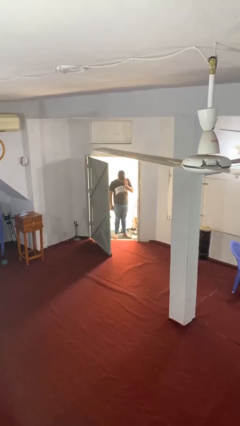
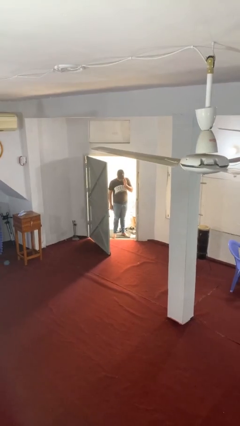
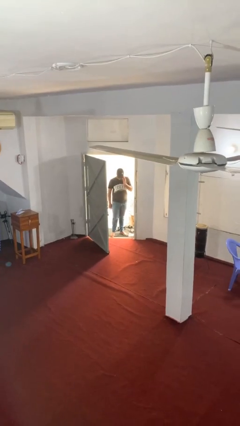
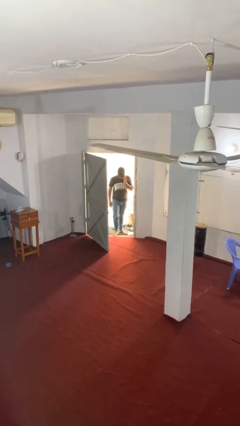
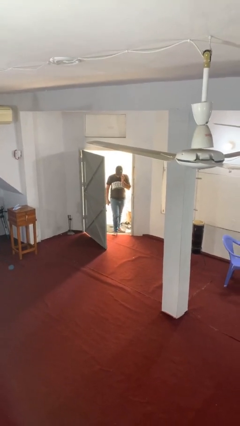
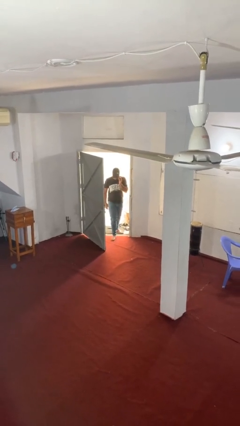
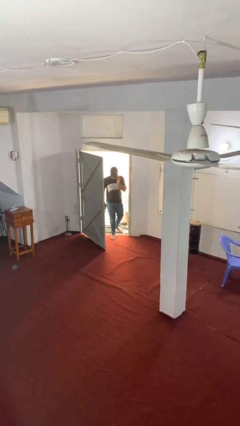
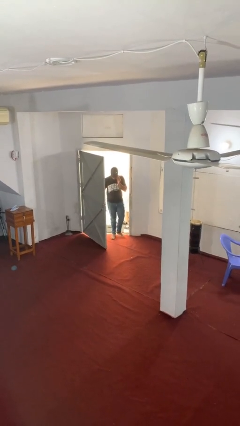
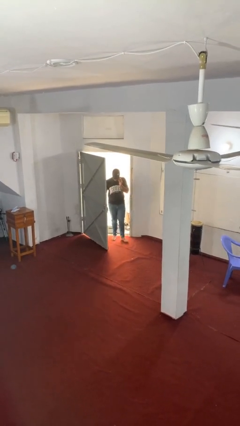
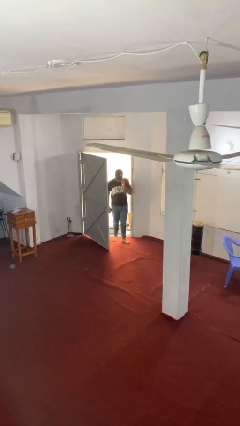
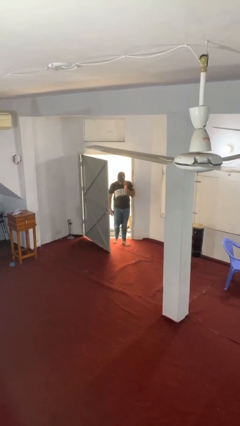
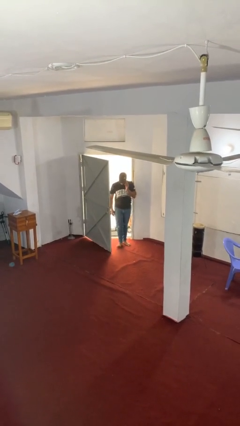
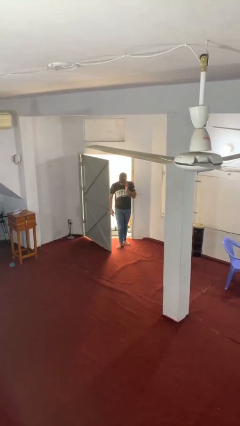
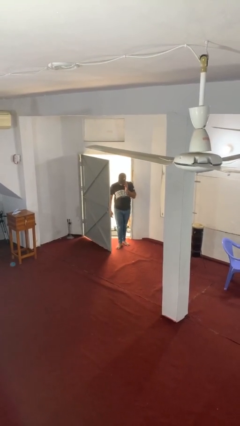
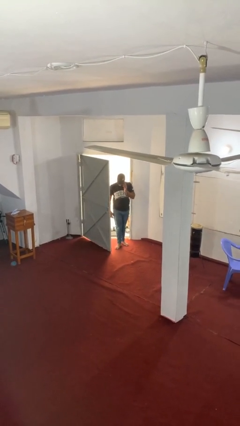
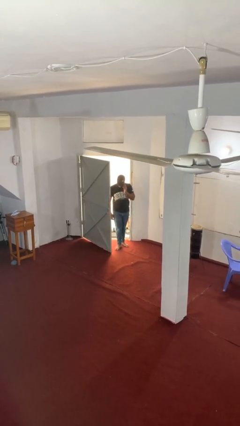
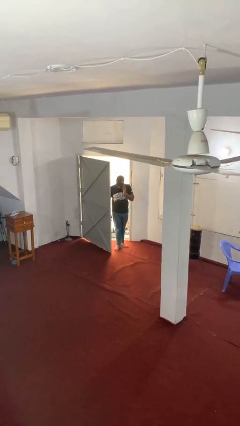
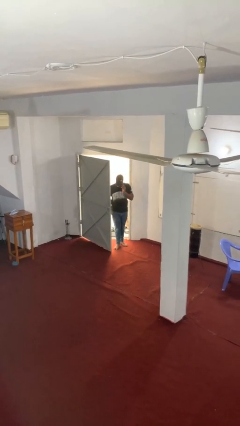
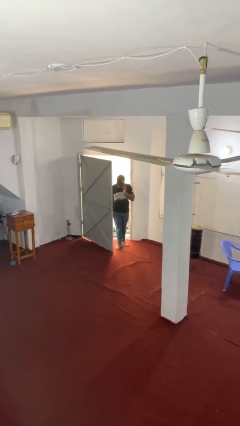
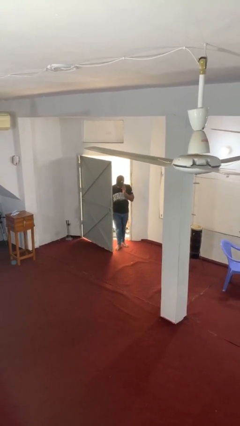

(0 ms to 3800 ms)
person enters scene through structure

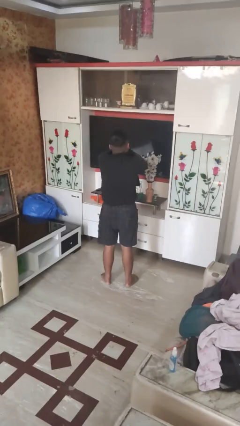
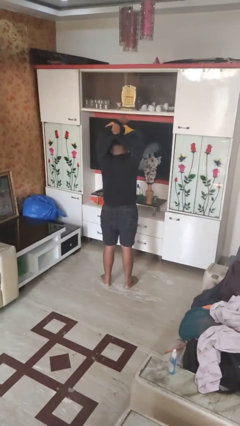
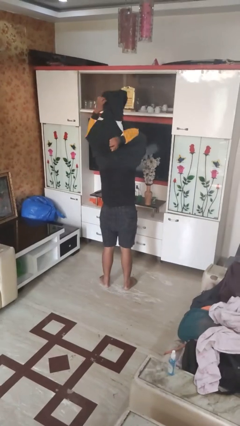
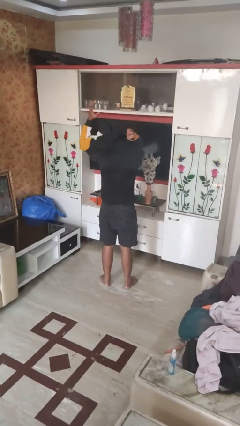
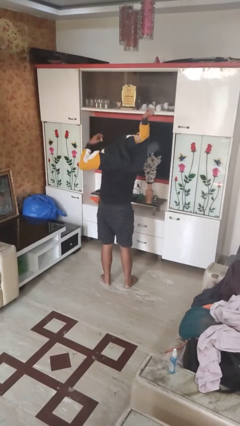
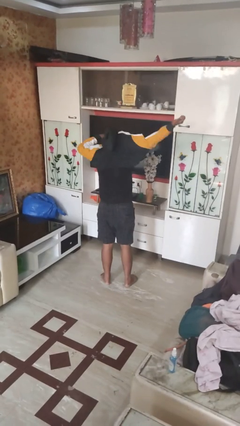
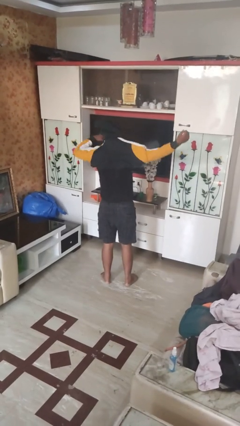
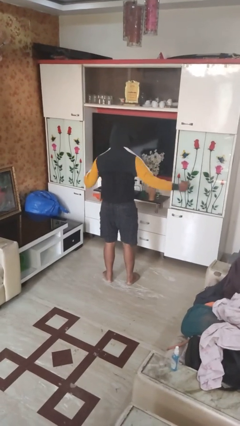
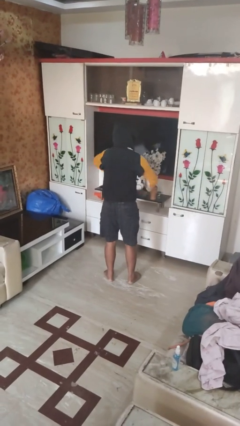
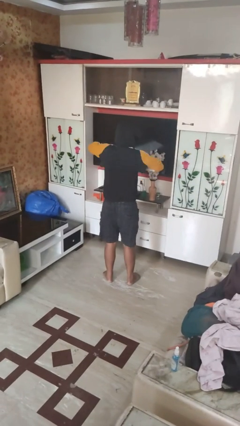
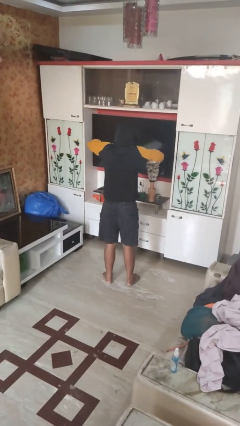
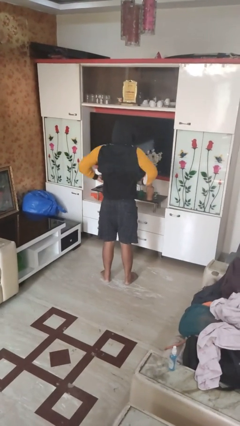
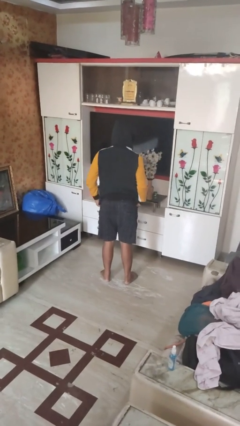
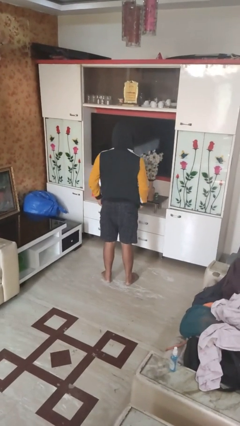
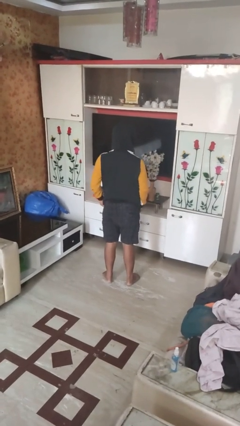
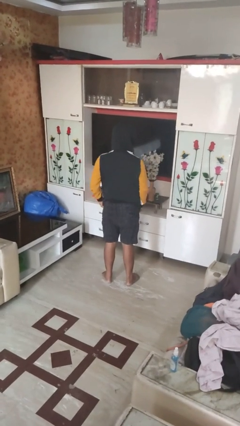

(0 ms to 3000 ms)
person puts on hoodie

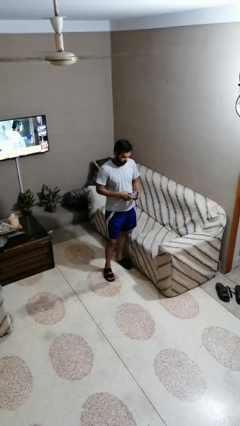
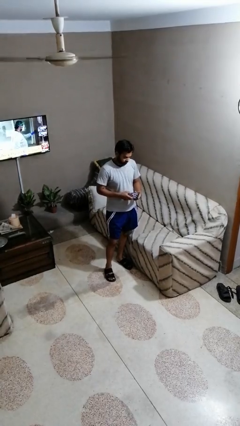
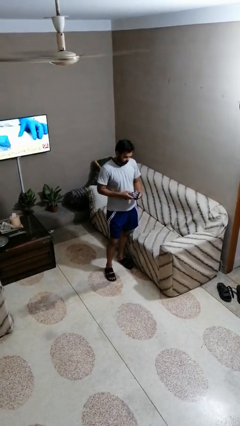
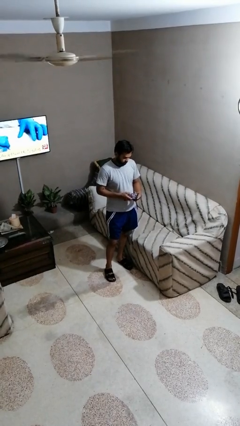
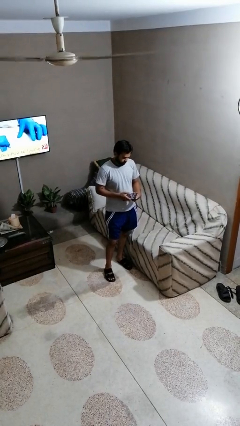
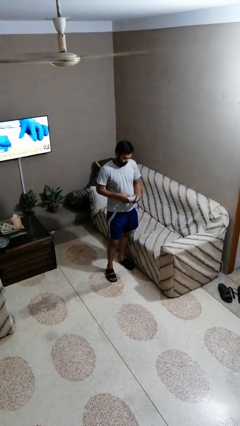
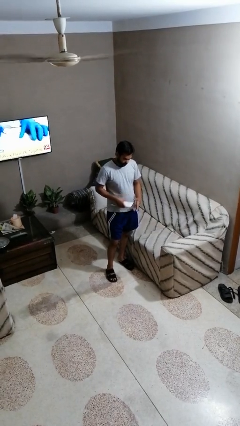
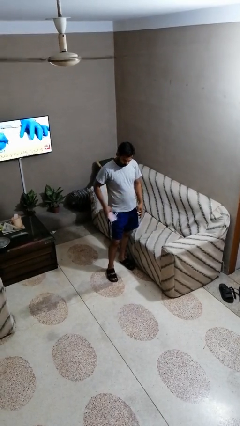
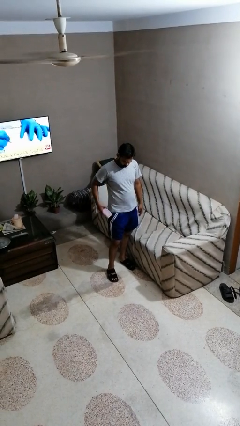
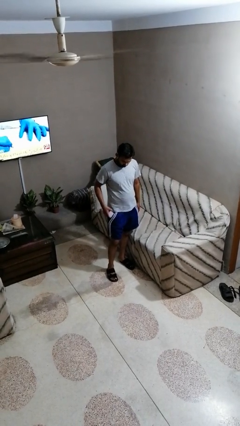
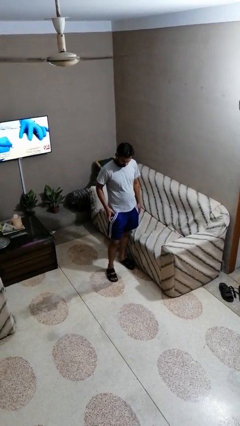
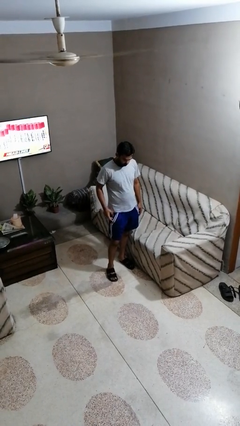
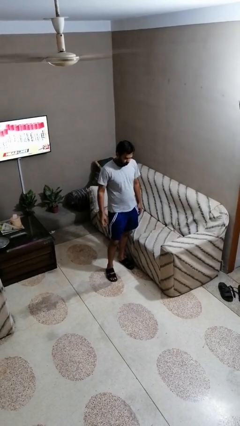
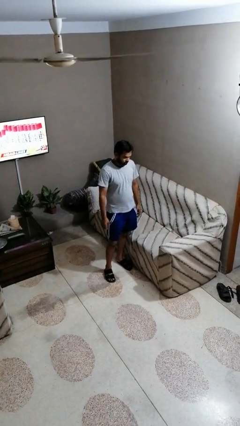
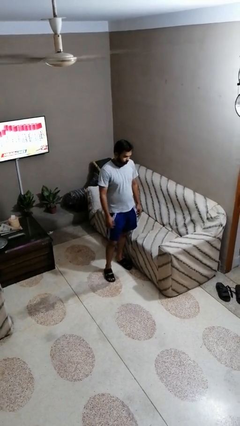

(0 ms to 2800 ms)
person puts phone into pocket

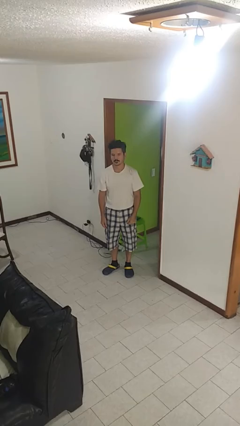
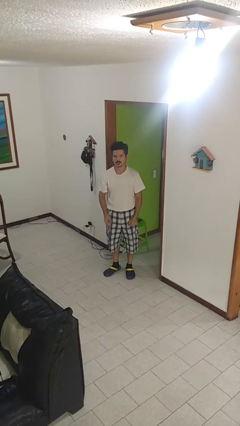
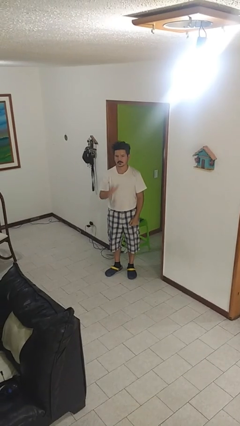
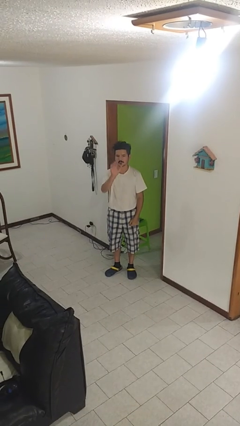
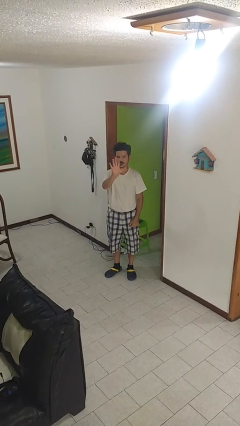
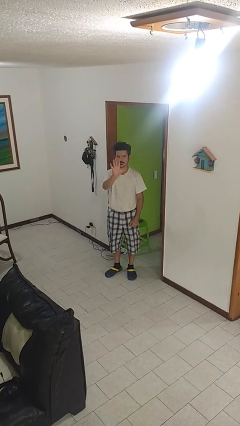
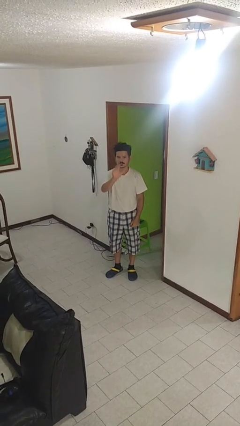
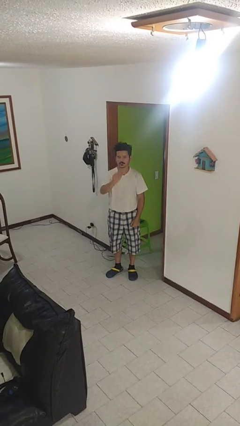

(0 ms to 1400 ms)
person gestures number five

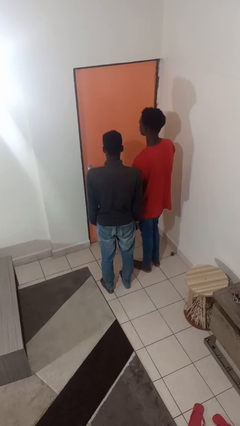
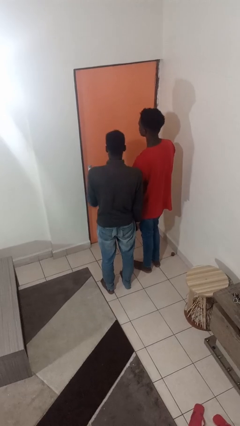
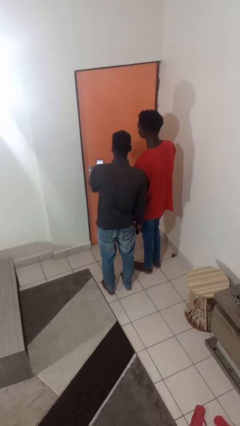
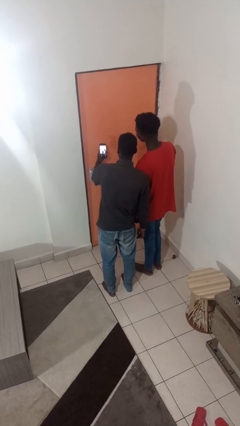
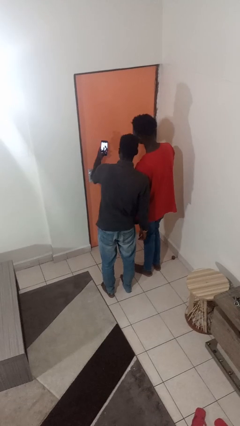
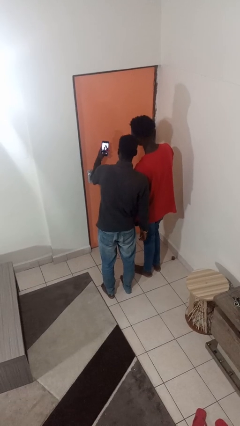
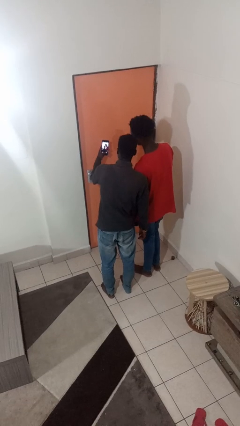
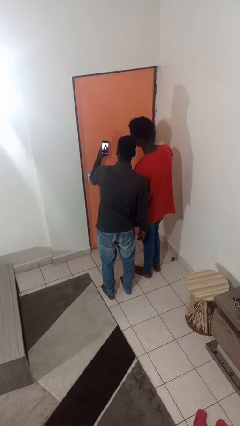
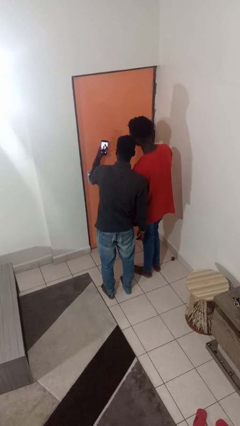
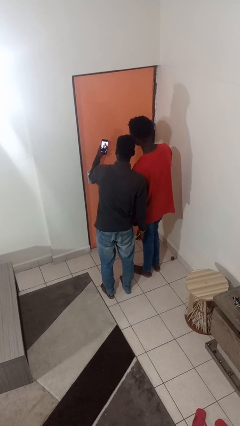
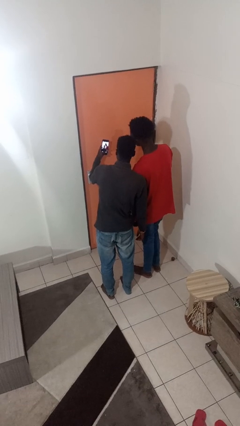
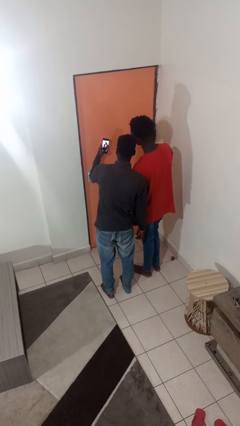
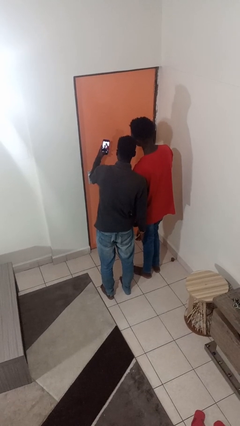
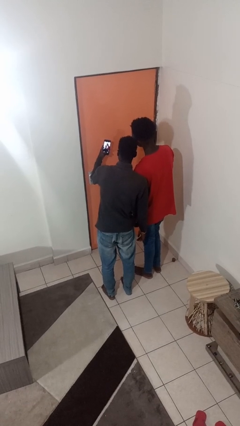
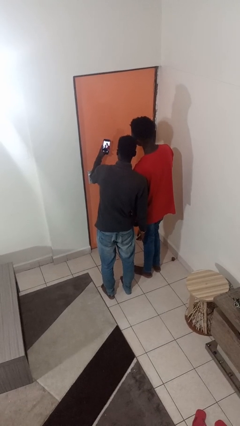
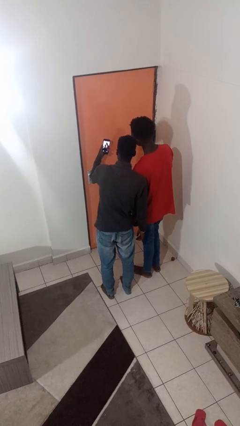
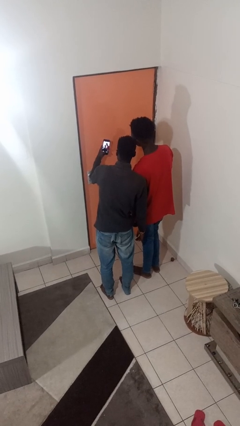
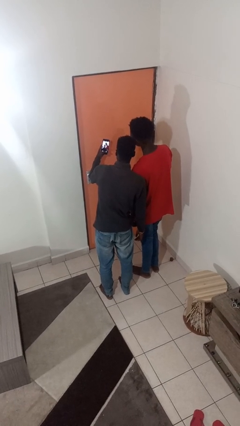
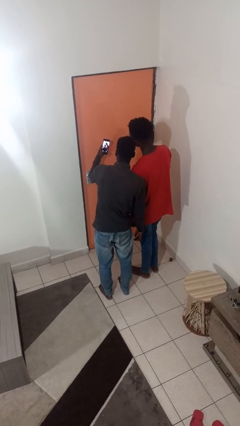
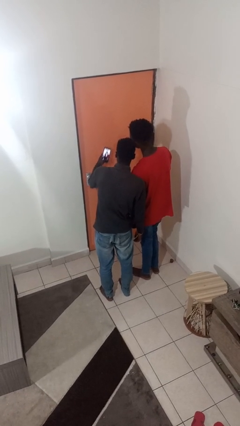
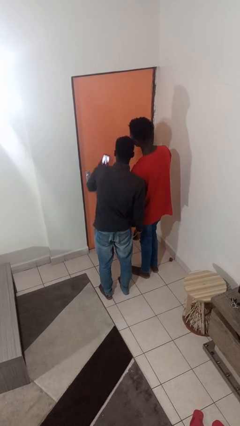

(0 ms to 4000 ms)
person takes selfie with person

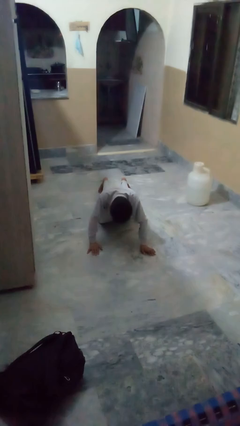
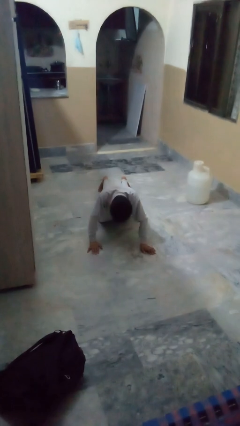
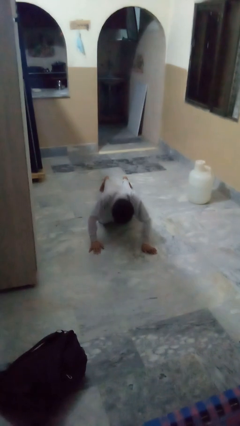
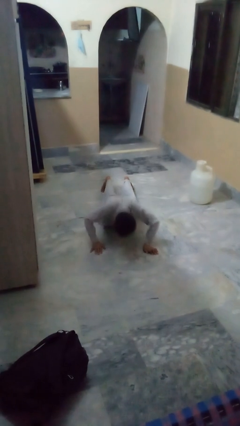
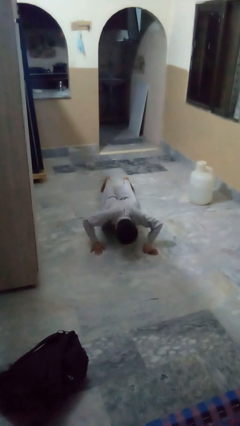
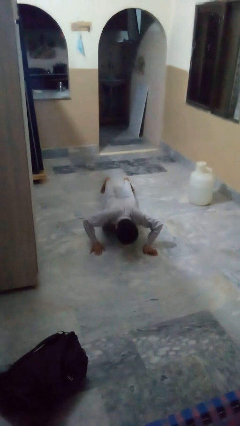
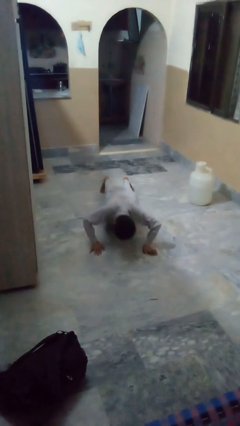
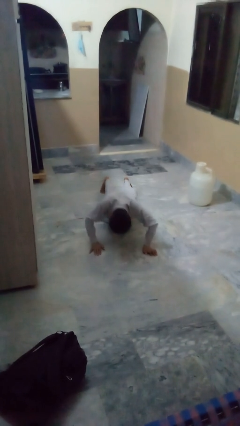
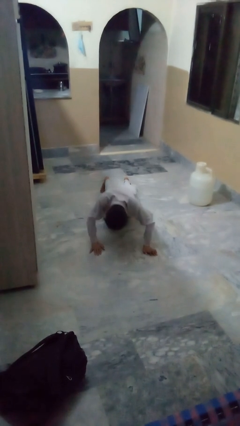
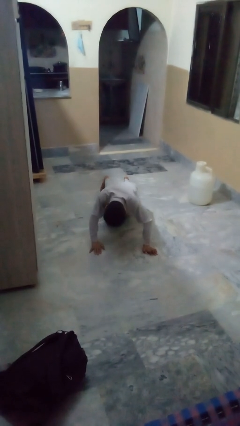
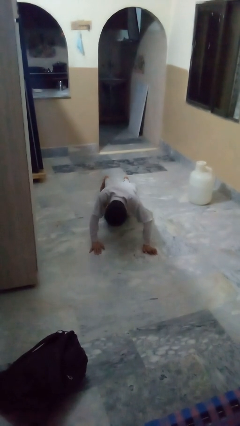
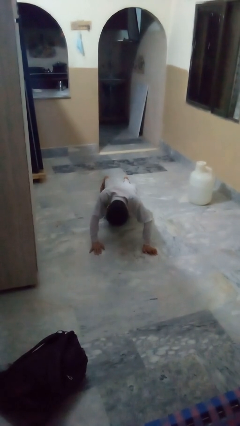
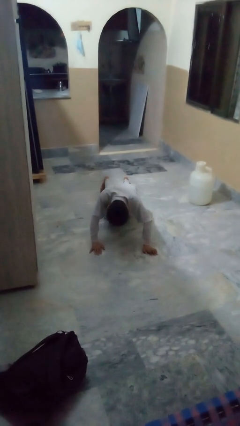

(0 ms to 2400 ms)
person exercises with pushup
